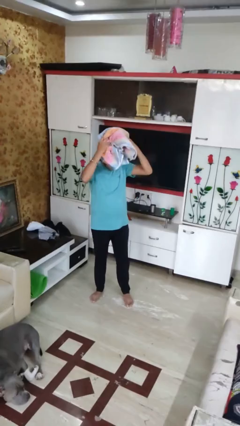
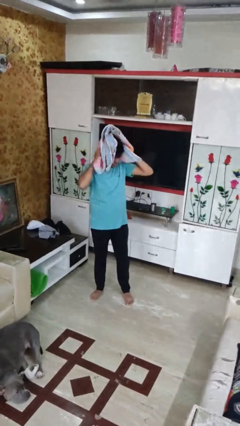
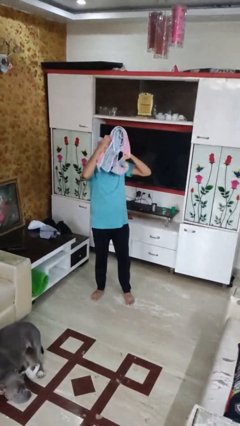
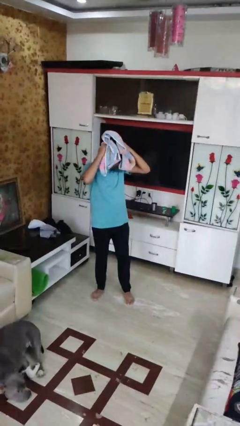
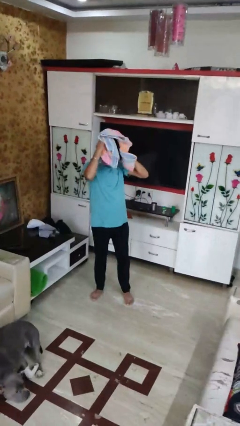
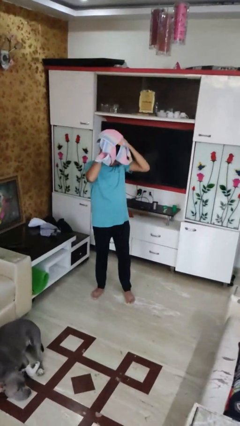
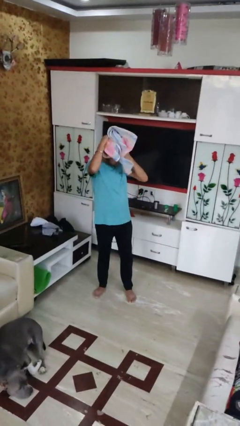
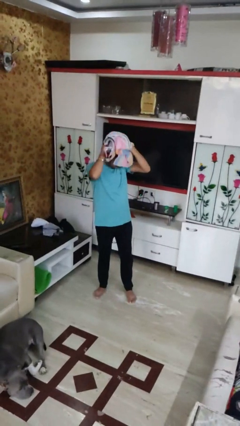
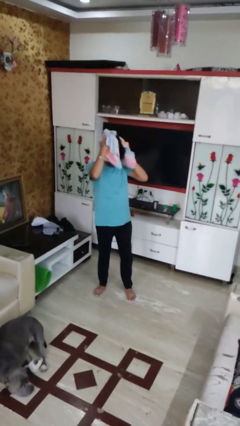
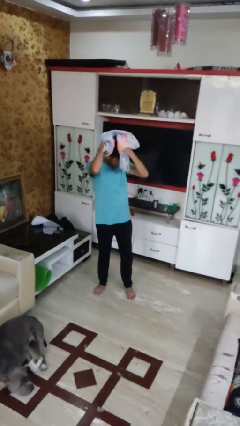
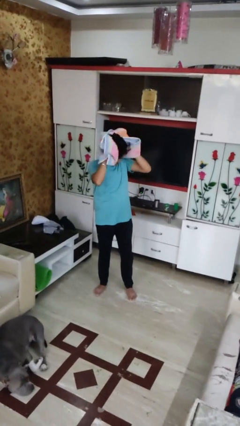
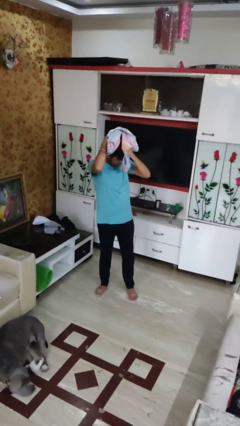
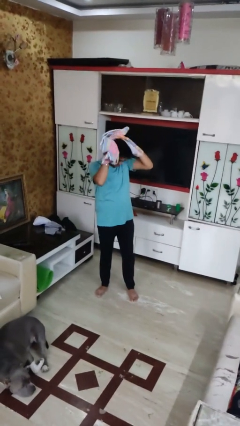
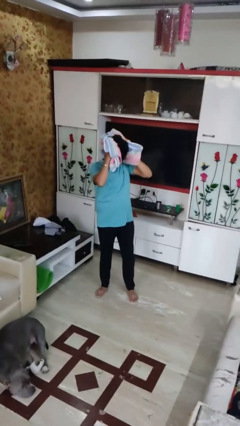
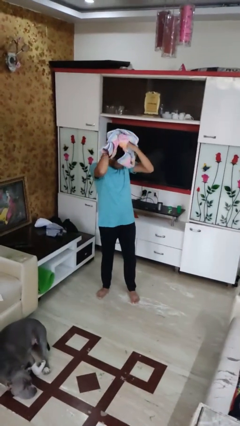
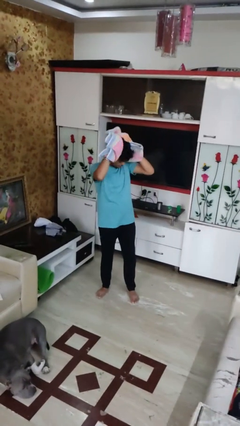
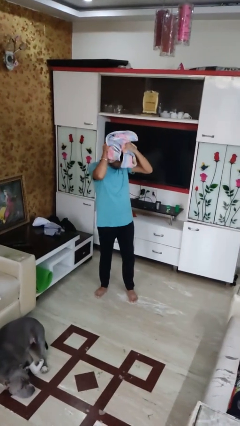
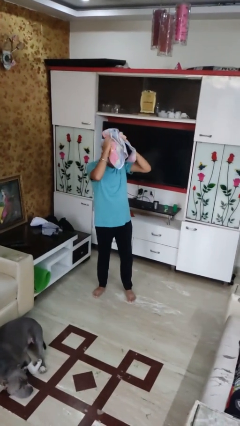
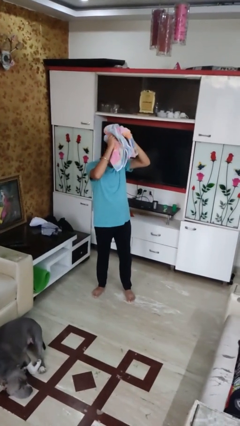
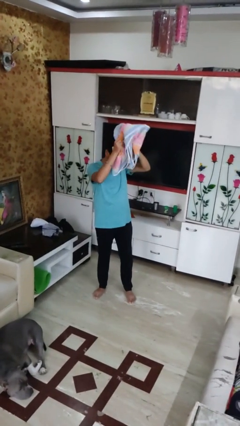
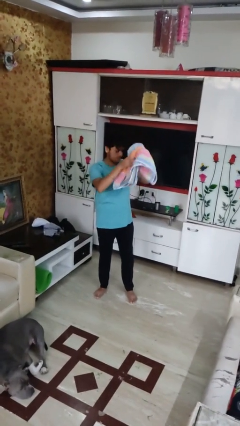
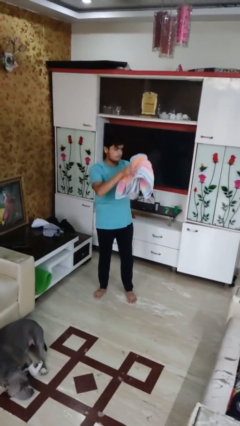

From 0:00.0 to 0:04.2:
person dries hair with towel

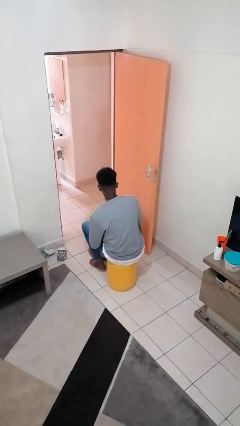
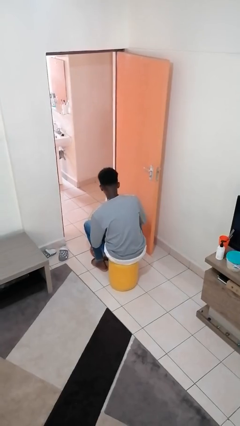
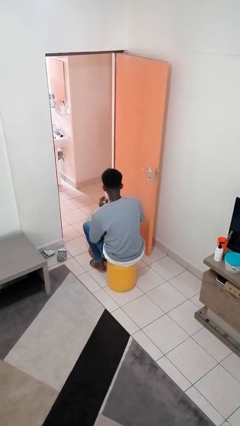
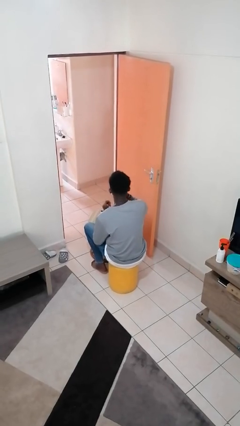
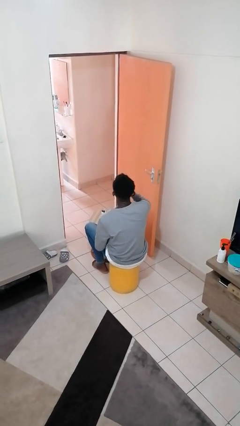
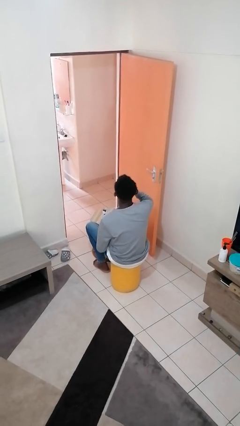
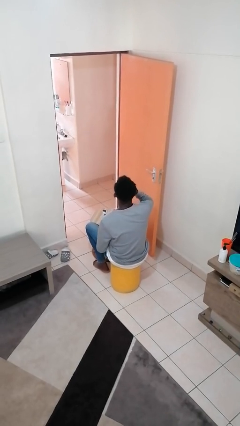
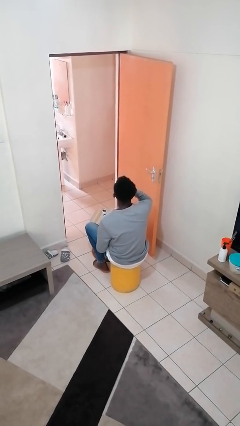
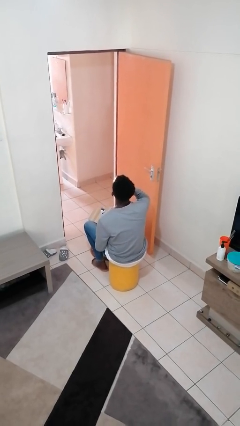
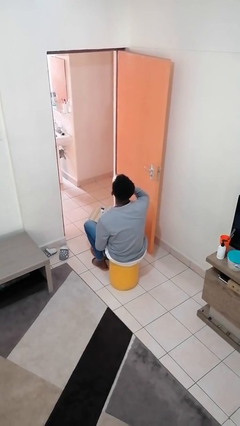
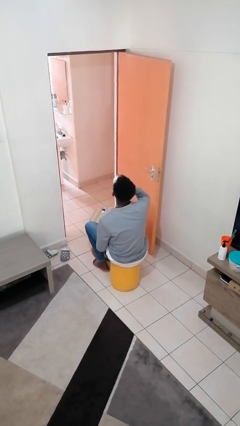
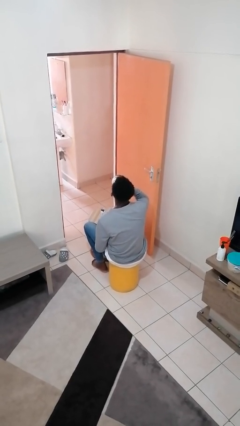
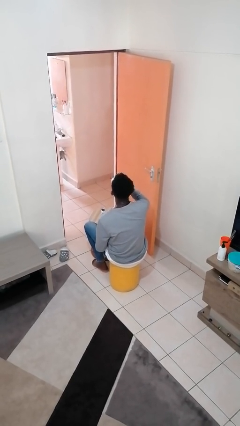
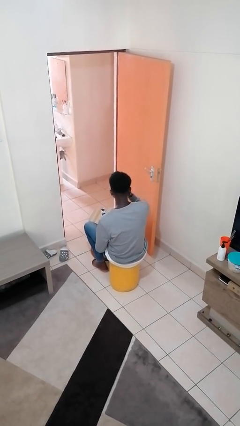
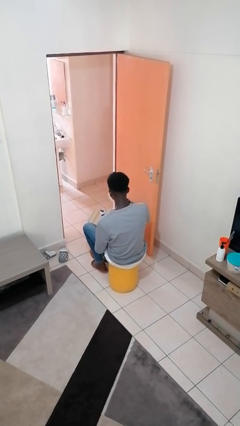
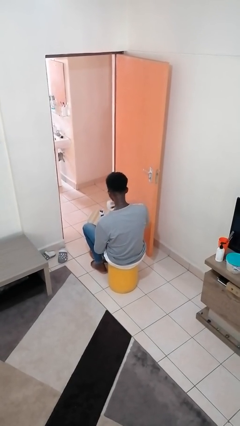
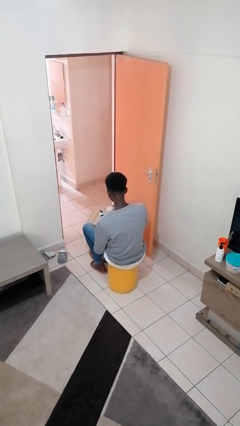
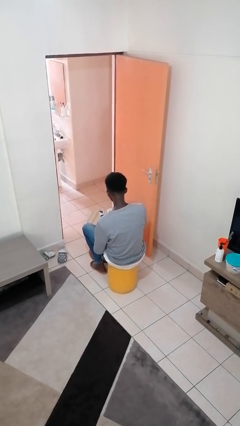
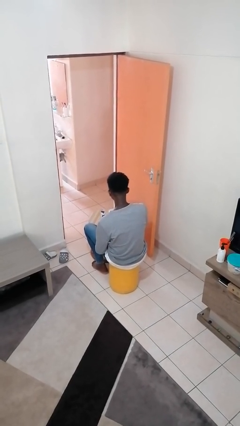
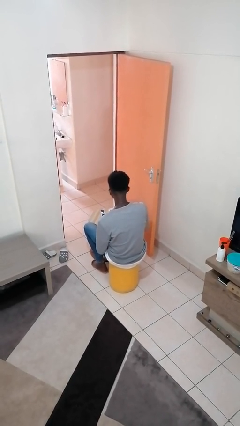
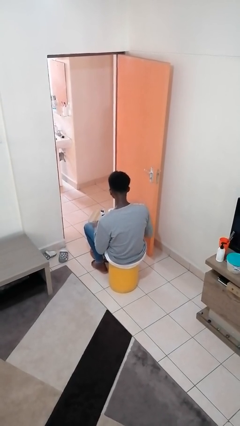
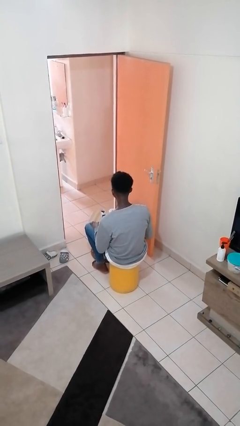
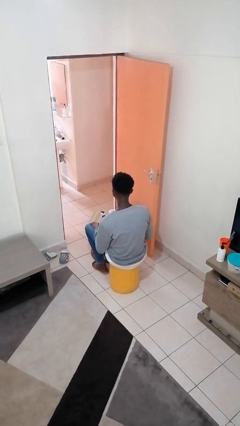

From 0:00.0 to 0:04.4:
person drinks from cup

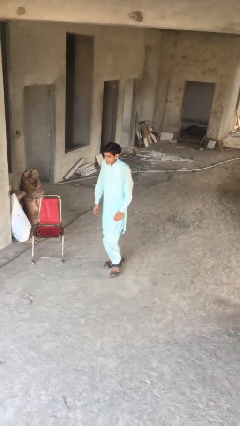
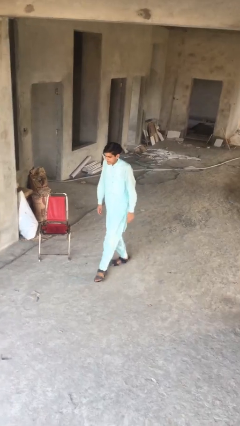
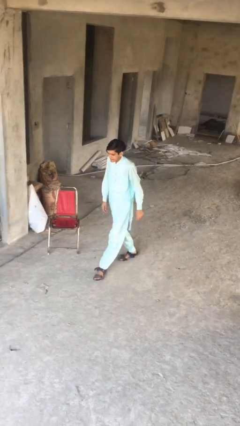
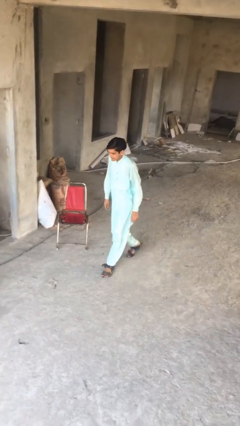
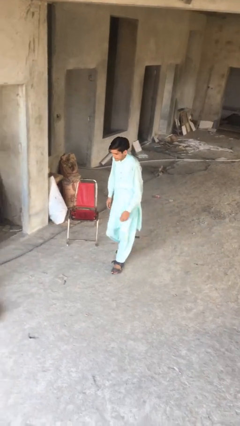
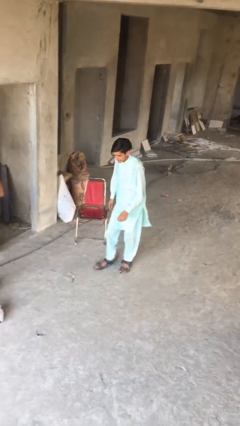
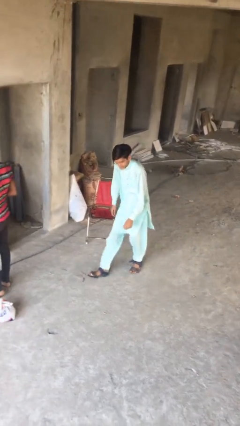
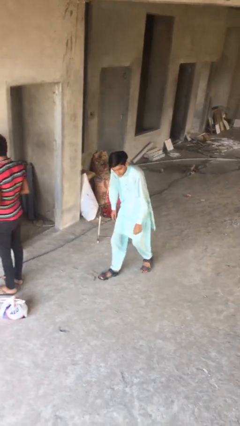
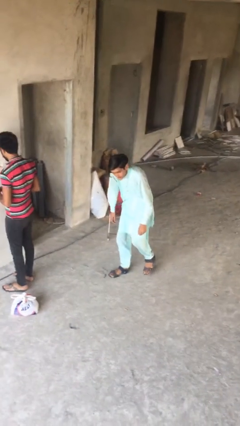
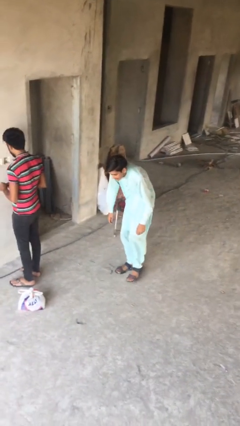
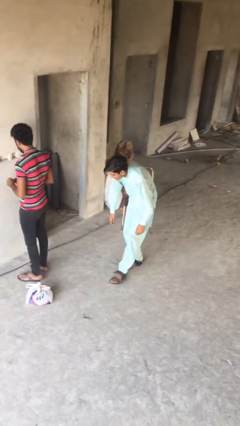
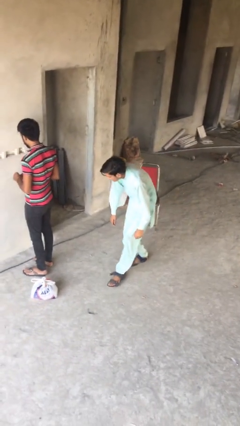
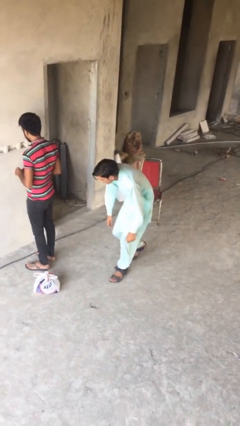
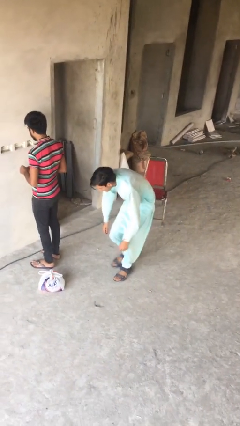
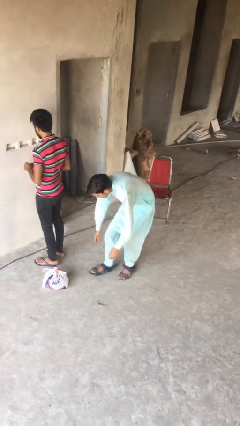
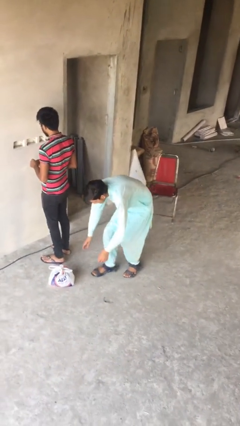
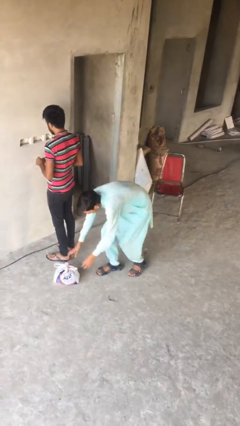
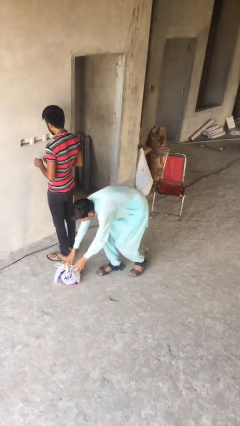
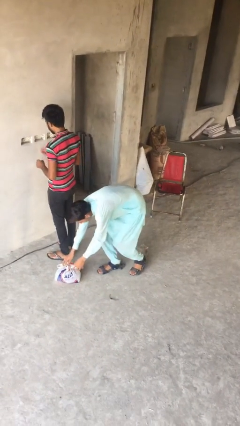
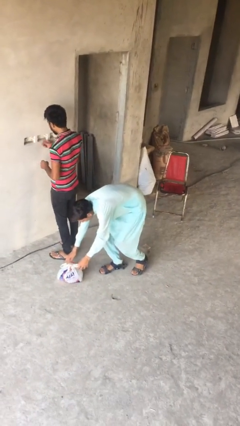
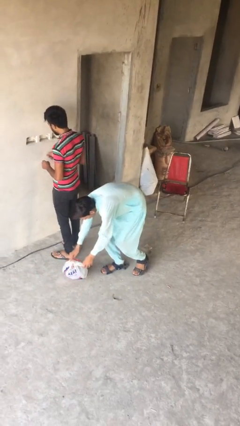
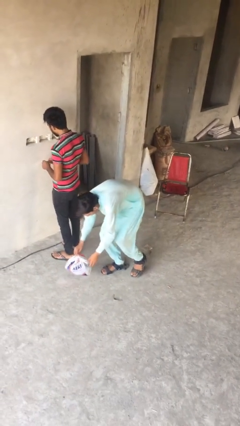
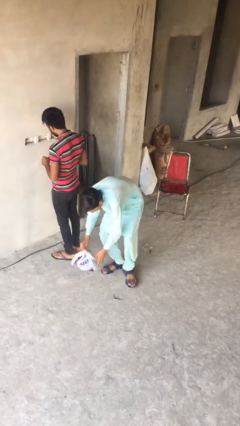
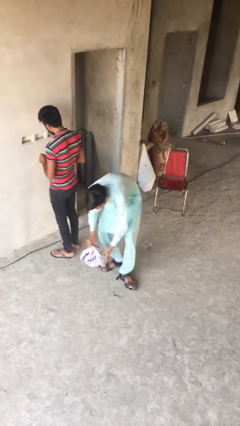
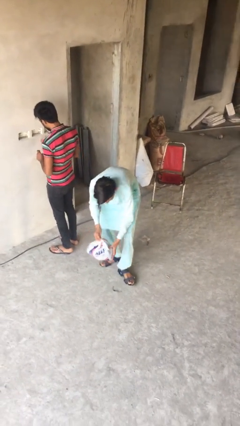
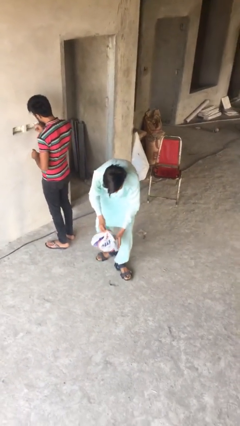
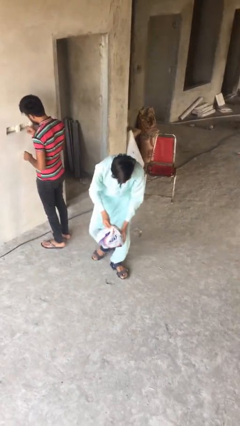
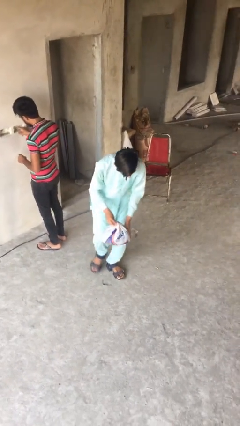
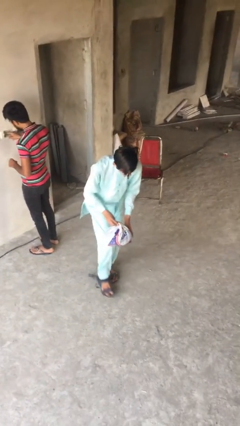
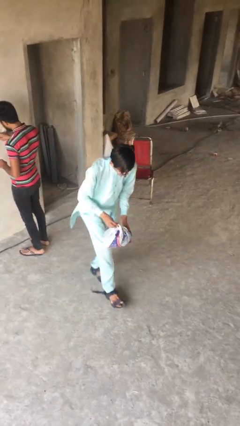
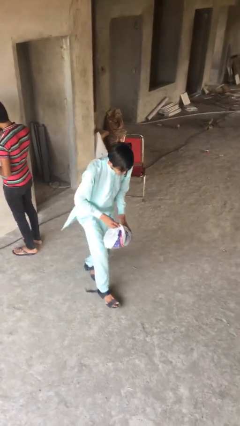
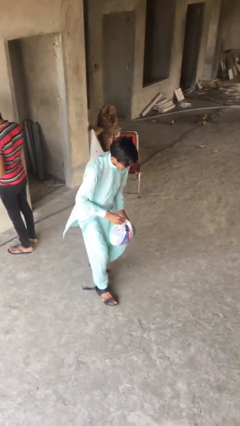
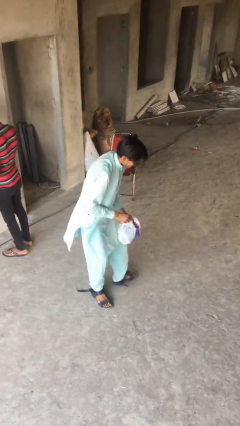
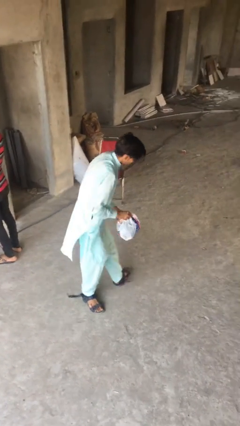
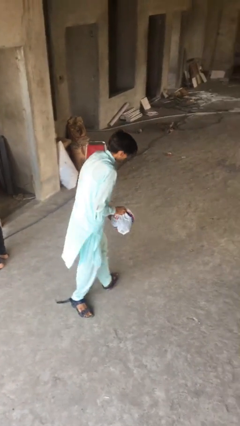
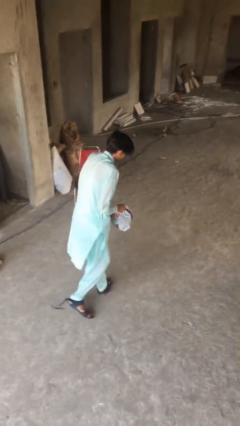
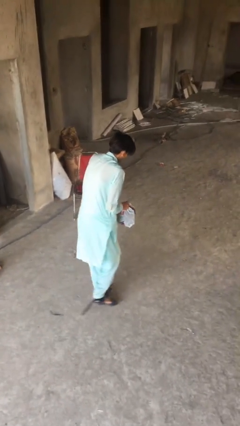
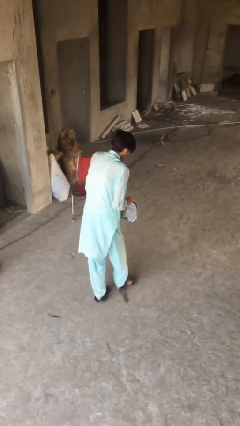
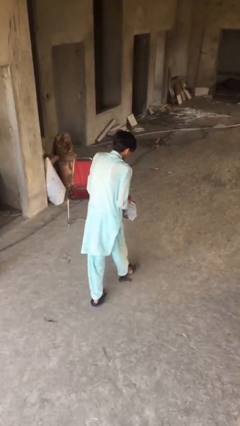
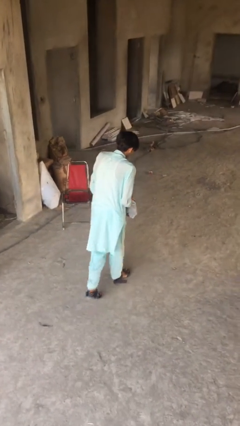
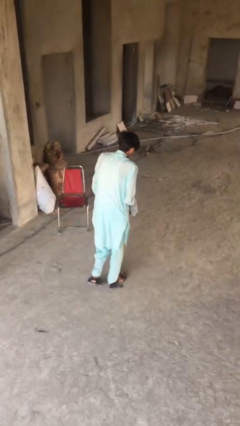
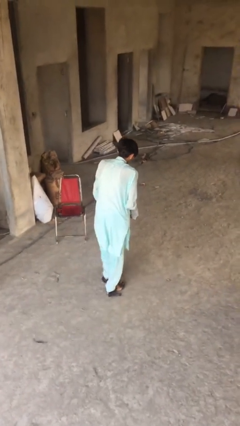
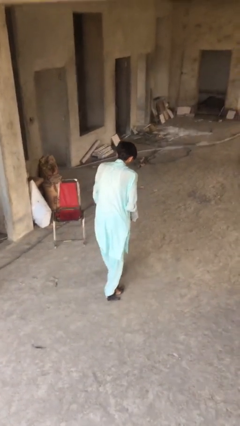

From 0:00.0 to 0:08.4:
person steals object from person

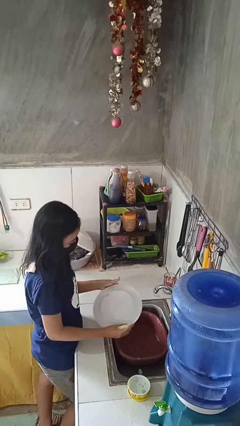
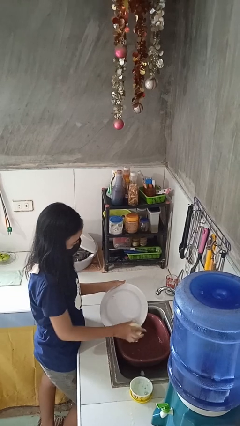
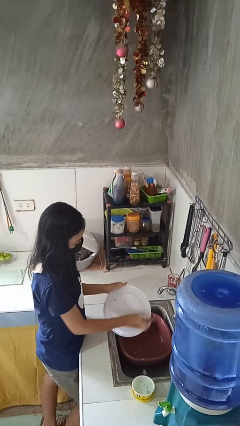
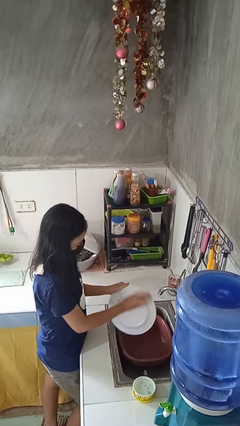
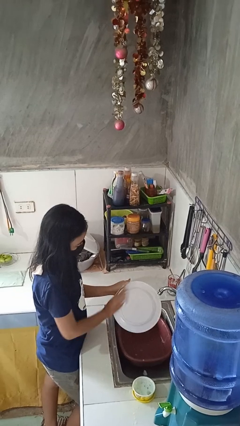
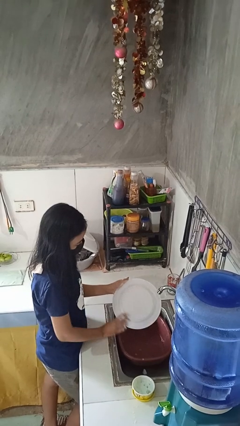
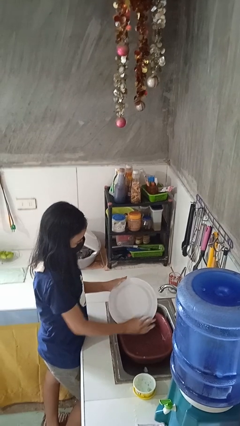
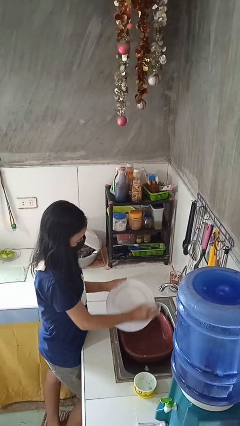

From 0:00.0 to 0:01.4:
person washes dish
